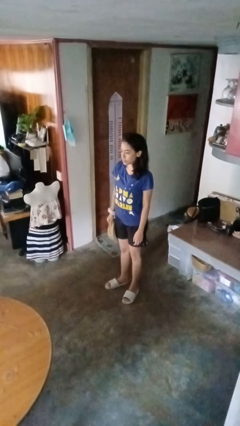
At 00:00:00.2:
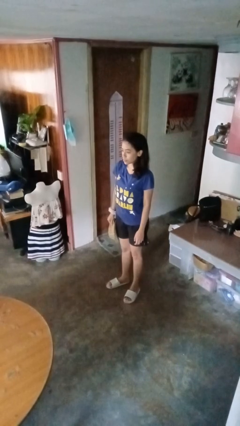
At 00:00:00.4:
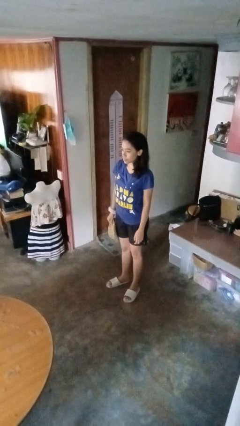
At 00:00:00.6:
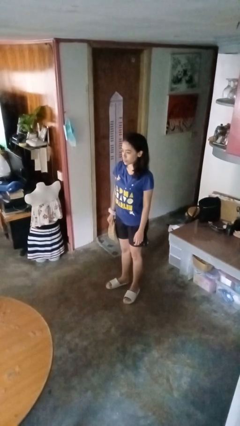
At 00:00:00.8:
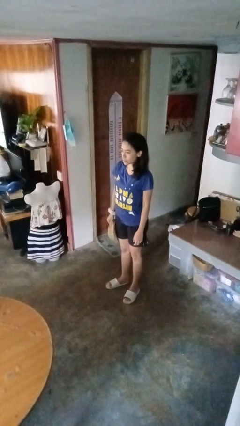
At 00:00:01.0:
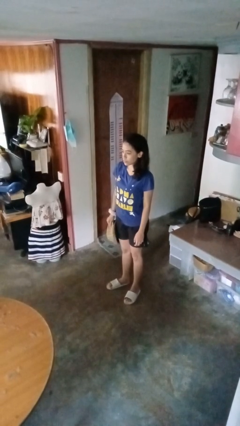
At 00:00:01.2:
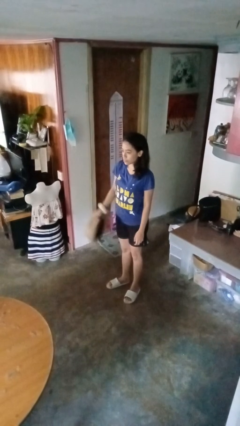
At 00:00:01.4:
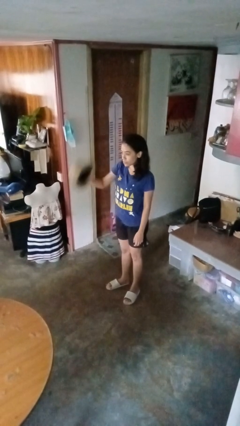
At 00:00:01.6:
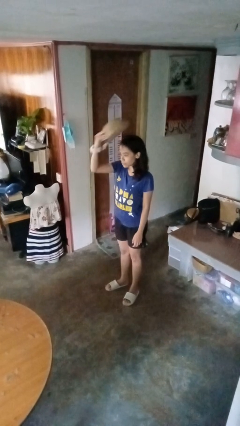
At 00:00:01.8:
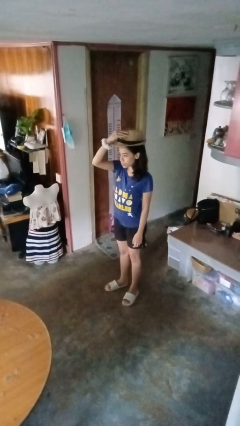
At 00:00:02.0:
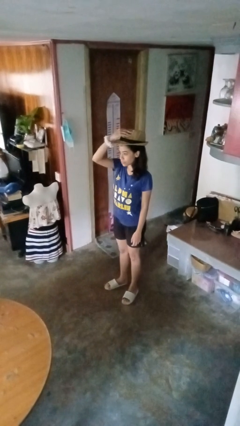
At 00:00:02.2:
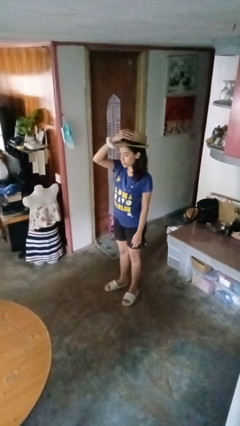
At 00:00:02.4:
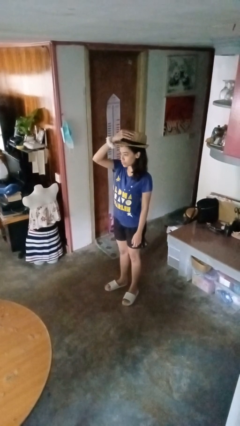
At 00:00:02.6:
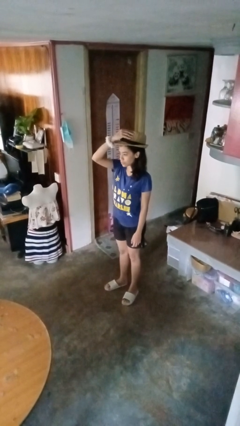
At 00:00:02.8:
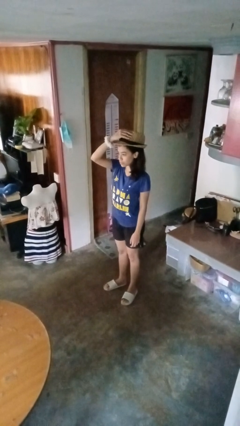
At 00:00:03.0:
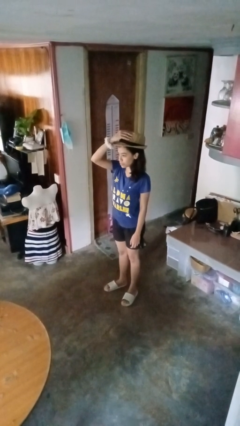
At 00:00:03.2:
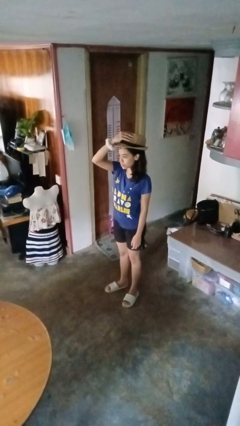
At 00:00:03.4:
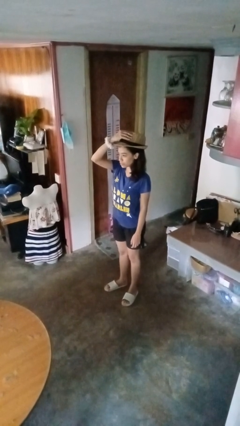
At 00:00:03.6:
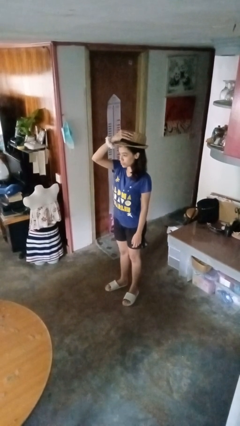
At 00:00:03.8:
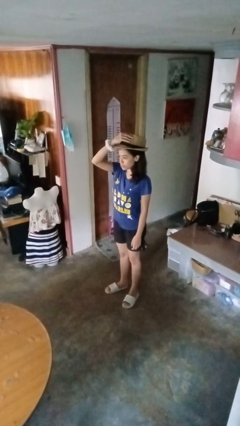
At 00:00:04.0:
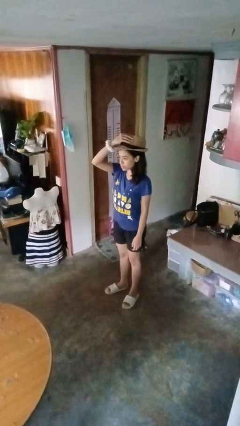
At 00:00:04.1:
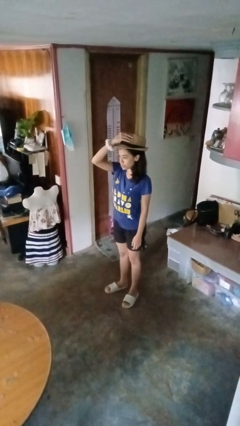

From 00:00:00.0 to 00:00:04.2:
person puts on hat

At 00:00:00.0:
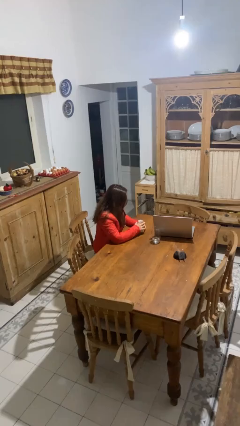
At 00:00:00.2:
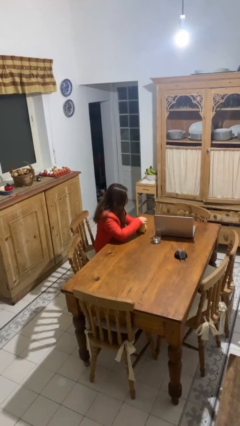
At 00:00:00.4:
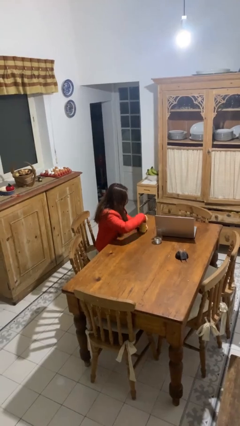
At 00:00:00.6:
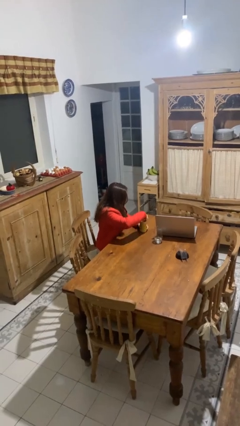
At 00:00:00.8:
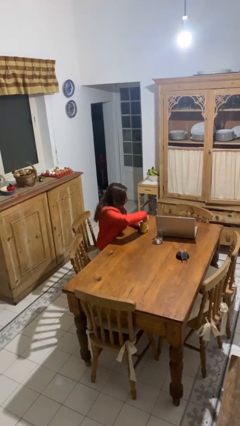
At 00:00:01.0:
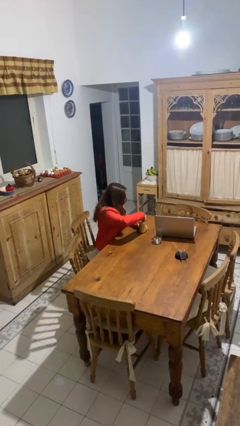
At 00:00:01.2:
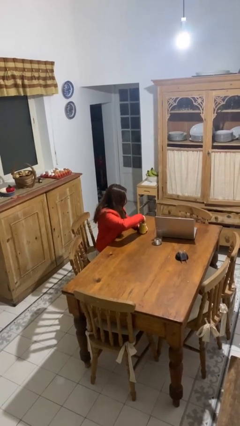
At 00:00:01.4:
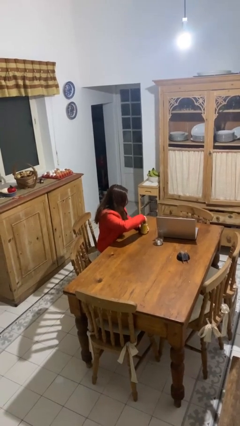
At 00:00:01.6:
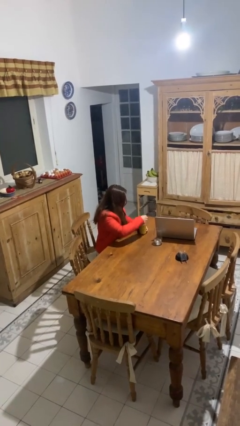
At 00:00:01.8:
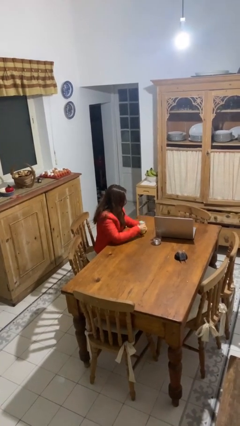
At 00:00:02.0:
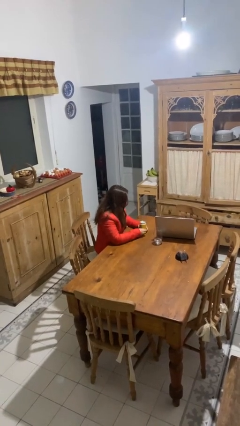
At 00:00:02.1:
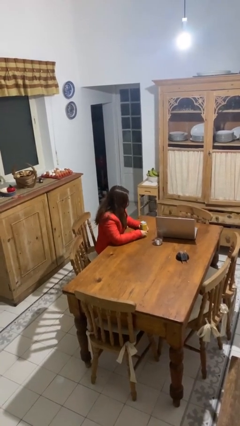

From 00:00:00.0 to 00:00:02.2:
person opens beverage can

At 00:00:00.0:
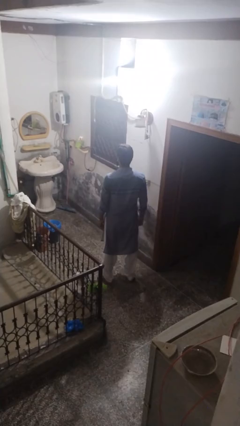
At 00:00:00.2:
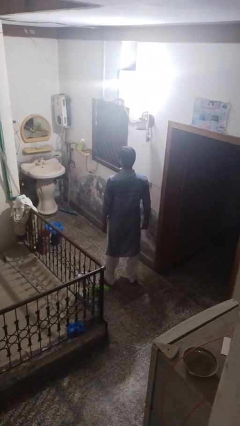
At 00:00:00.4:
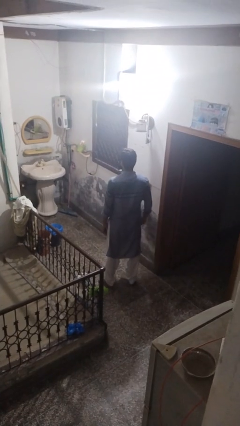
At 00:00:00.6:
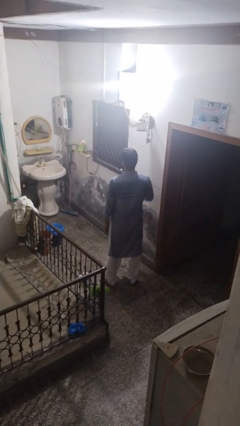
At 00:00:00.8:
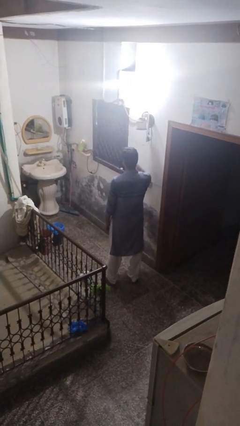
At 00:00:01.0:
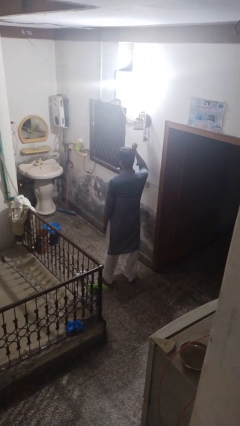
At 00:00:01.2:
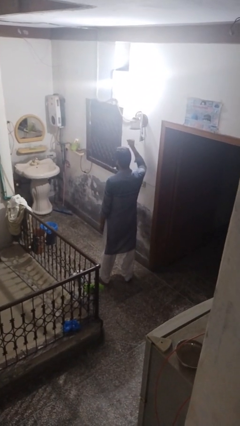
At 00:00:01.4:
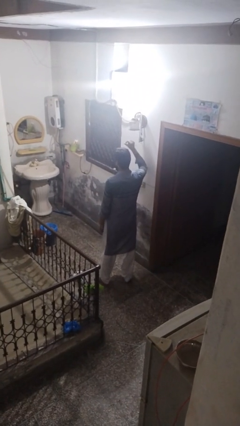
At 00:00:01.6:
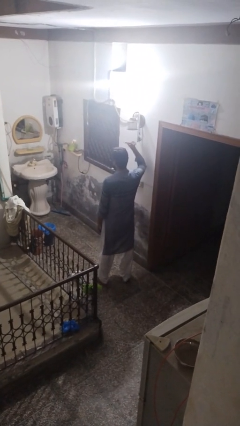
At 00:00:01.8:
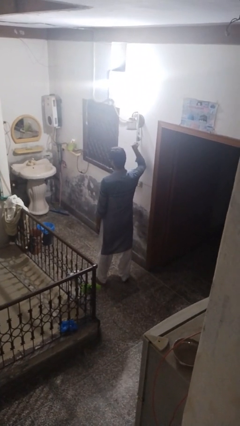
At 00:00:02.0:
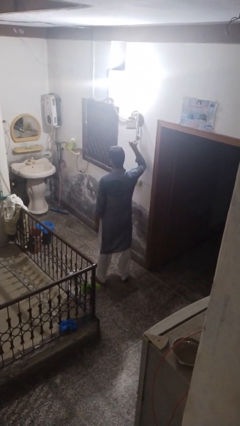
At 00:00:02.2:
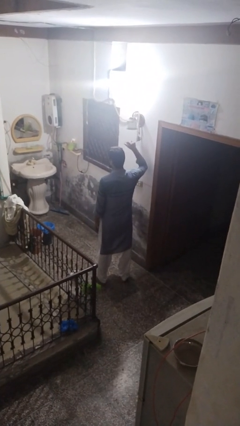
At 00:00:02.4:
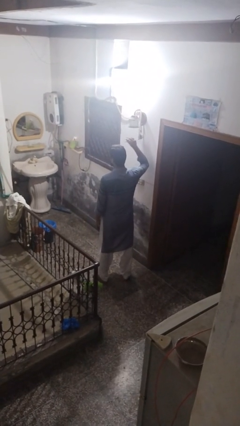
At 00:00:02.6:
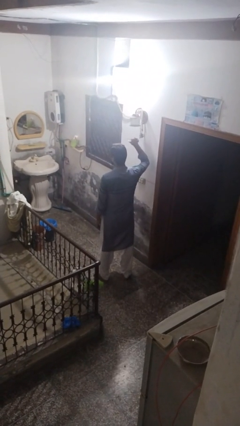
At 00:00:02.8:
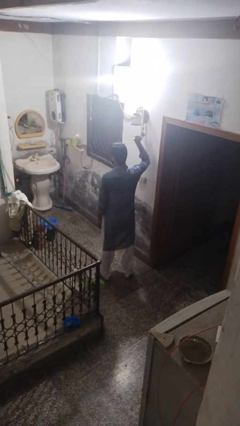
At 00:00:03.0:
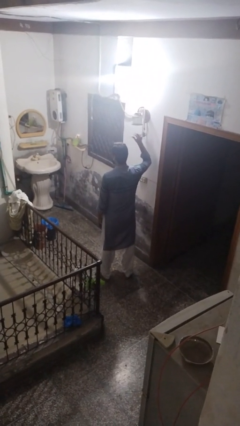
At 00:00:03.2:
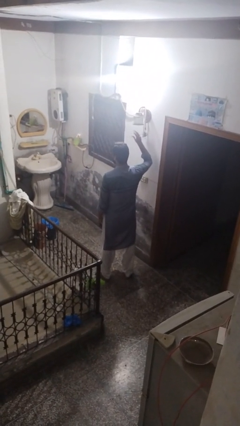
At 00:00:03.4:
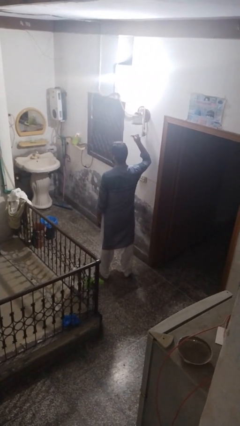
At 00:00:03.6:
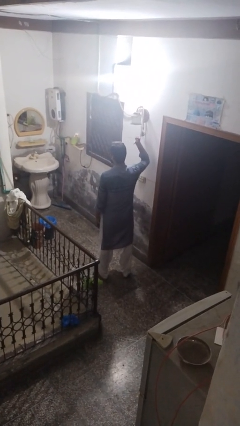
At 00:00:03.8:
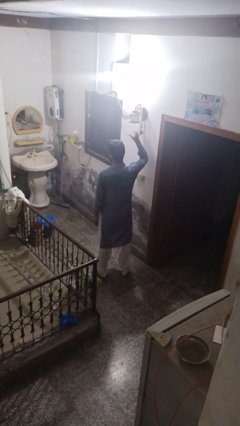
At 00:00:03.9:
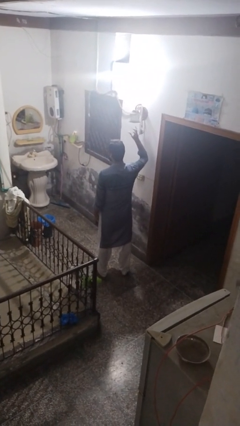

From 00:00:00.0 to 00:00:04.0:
person snaps fingers

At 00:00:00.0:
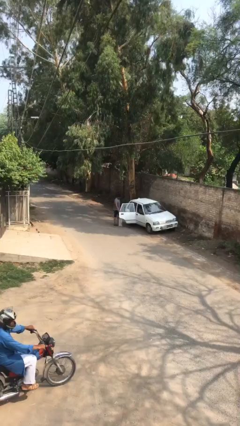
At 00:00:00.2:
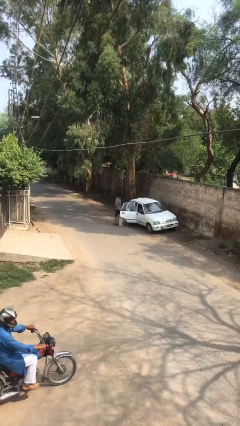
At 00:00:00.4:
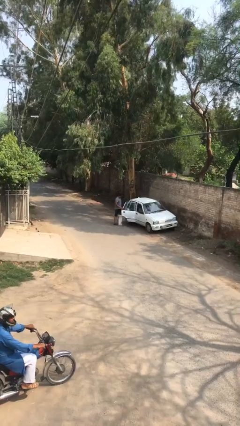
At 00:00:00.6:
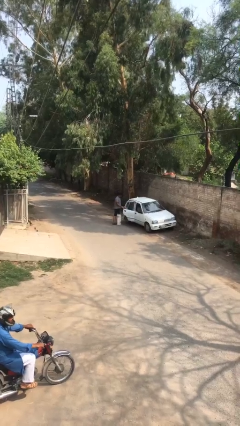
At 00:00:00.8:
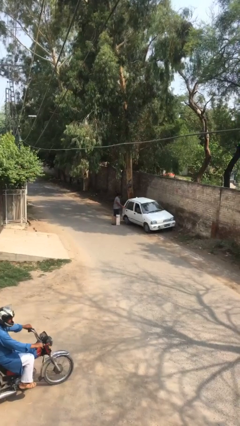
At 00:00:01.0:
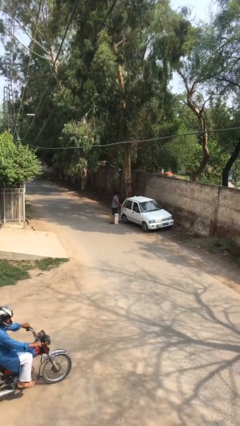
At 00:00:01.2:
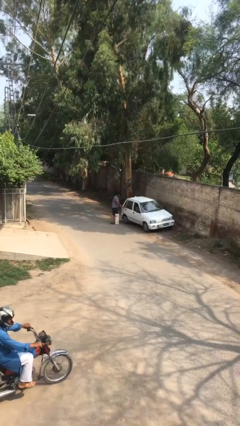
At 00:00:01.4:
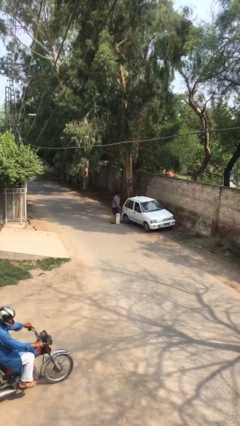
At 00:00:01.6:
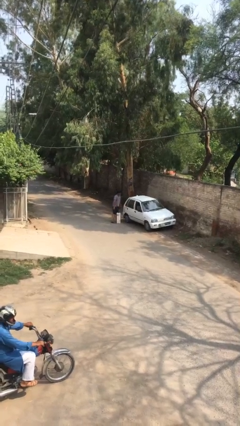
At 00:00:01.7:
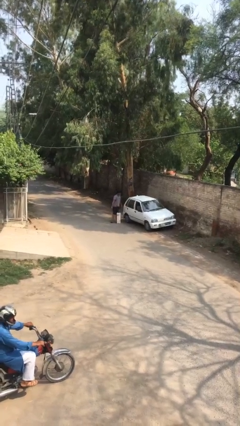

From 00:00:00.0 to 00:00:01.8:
person closes car door

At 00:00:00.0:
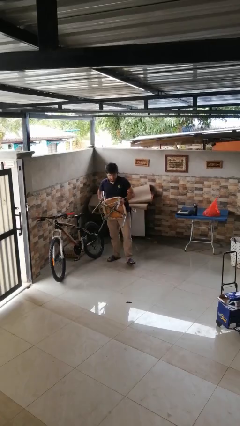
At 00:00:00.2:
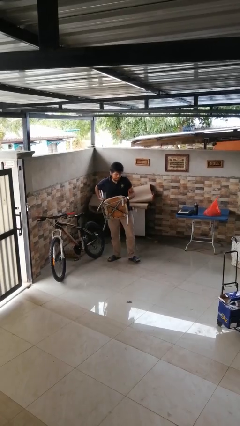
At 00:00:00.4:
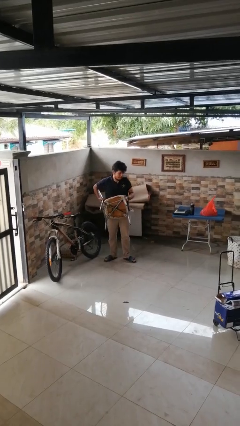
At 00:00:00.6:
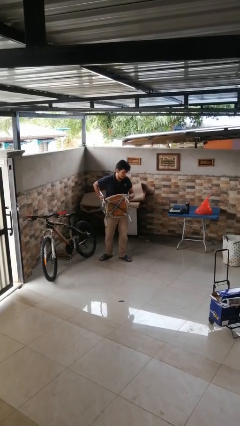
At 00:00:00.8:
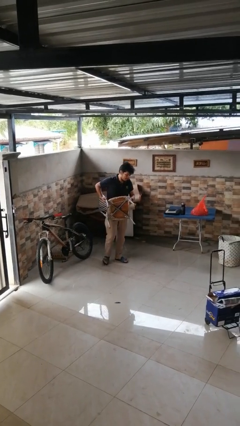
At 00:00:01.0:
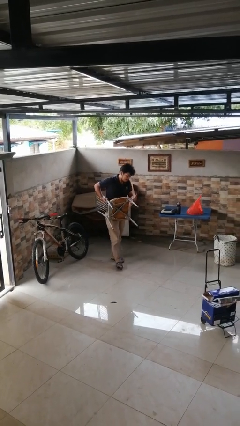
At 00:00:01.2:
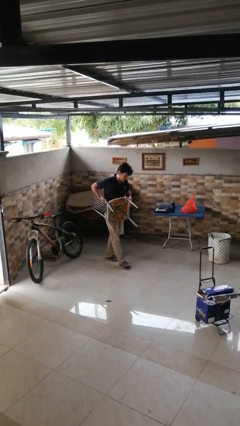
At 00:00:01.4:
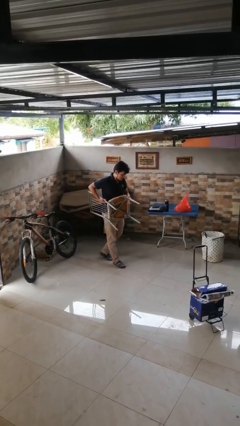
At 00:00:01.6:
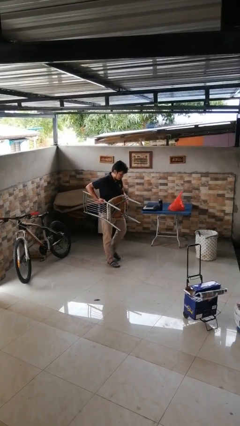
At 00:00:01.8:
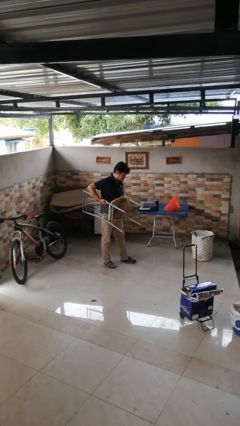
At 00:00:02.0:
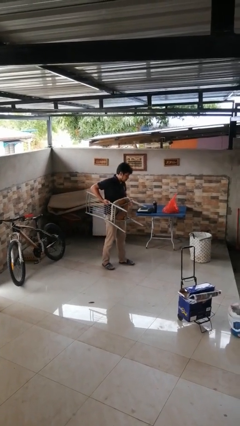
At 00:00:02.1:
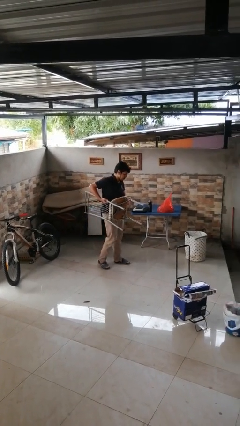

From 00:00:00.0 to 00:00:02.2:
person carries furniture

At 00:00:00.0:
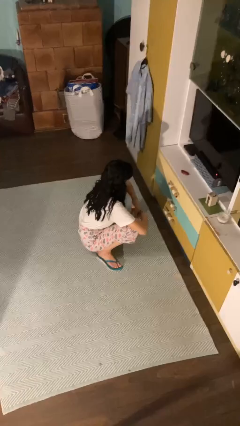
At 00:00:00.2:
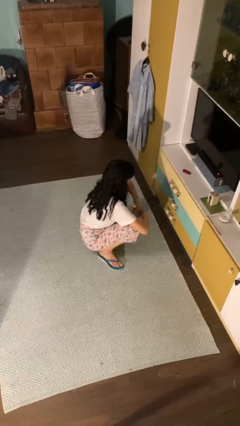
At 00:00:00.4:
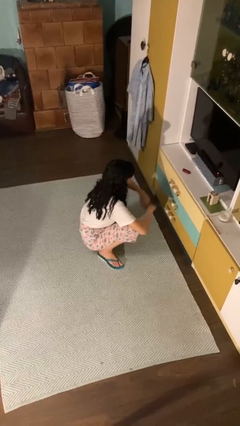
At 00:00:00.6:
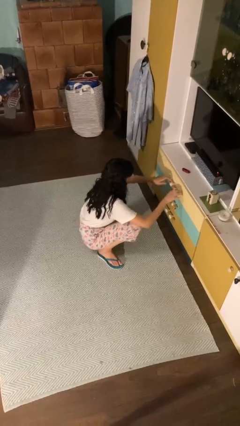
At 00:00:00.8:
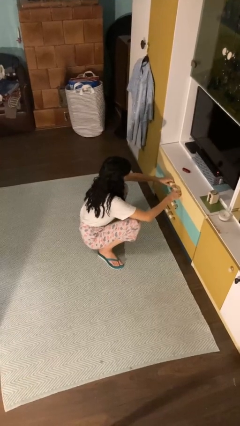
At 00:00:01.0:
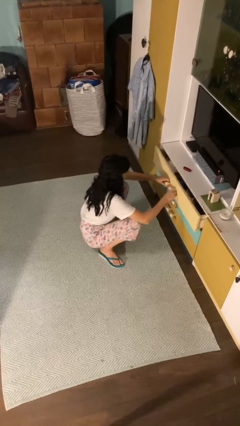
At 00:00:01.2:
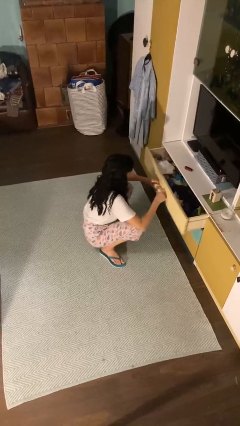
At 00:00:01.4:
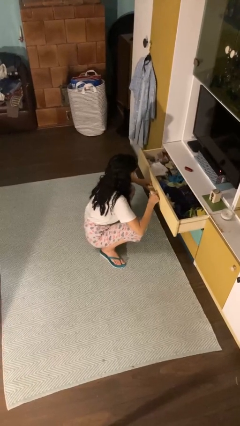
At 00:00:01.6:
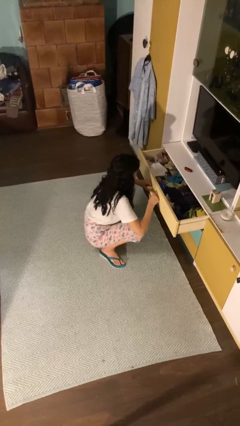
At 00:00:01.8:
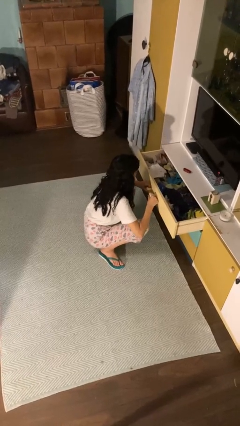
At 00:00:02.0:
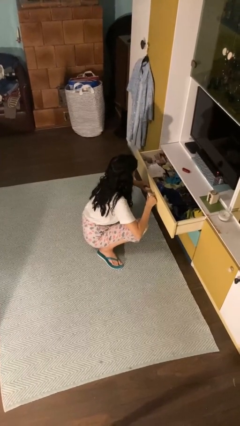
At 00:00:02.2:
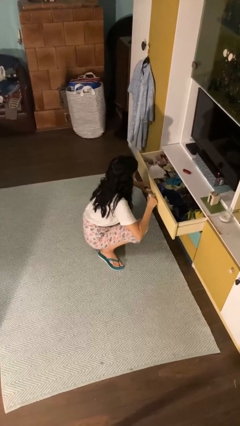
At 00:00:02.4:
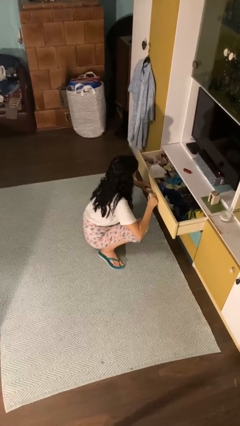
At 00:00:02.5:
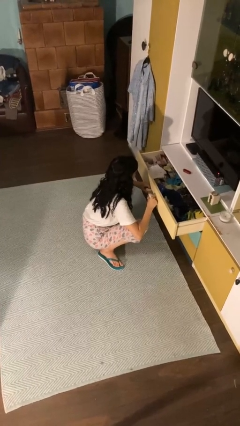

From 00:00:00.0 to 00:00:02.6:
person opens dresser drawer
